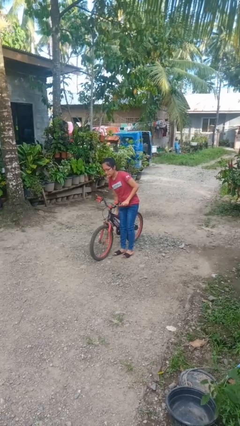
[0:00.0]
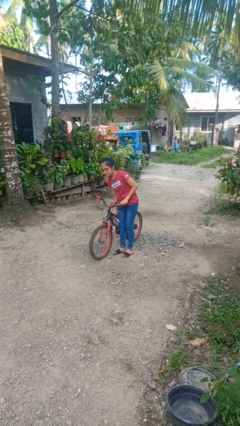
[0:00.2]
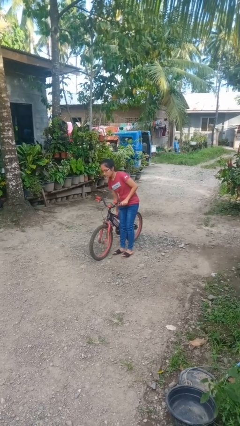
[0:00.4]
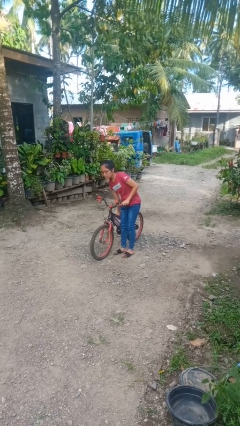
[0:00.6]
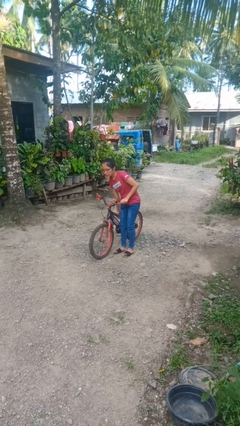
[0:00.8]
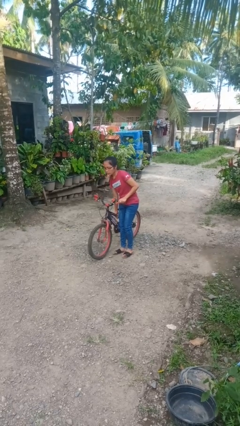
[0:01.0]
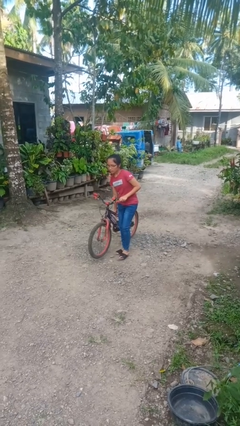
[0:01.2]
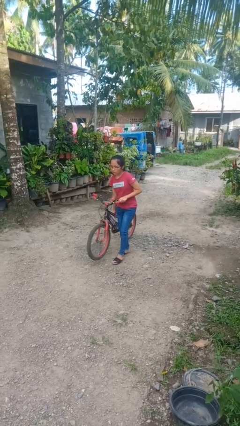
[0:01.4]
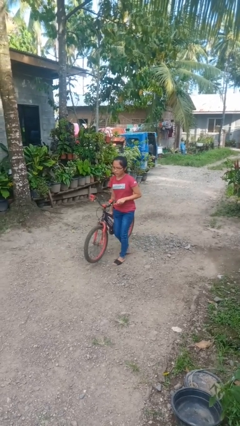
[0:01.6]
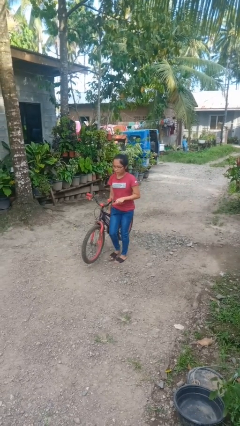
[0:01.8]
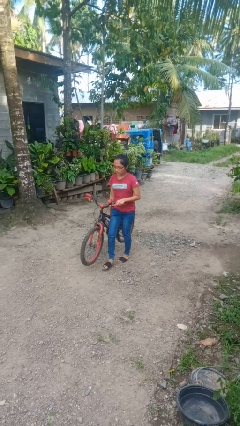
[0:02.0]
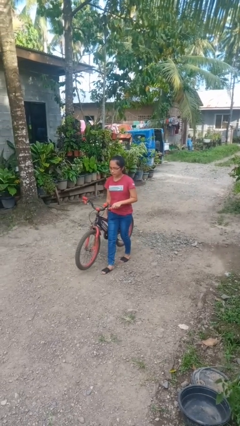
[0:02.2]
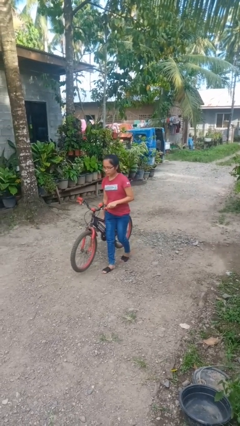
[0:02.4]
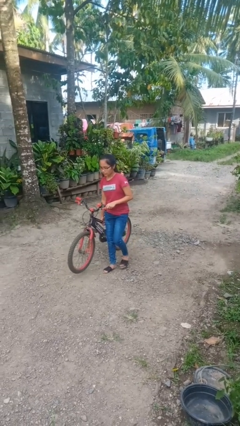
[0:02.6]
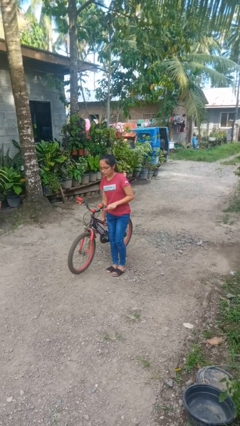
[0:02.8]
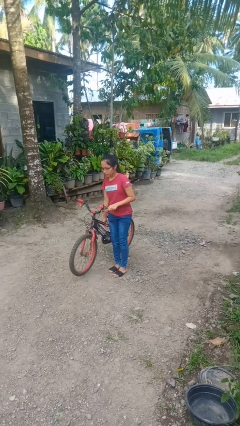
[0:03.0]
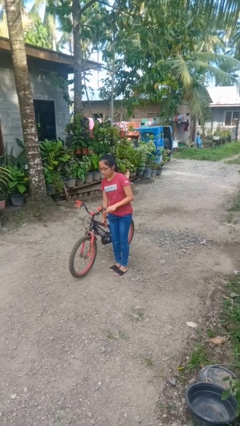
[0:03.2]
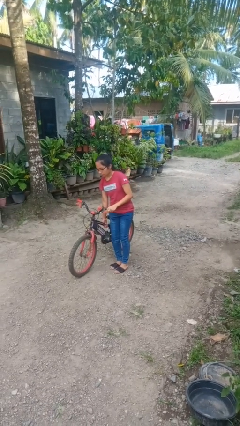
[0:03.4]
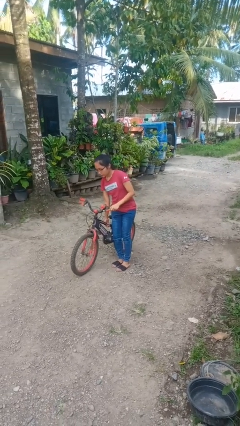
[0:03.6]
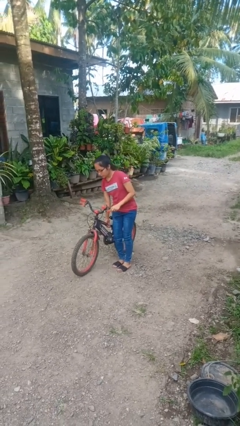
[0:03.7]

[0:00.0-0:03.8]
person carries bicycle

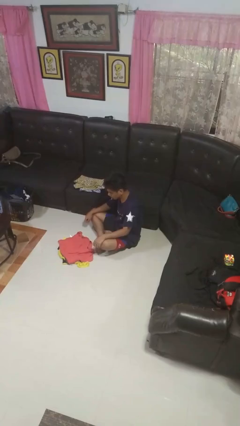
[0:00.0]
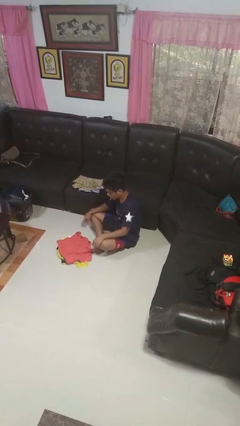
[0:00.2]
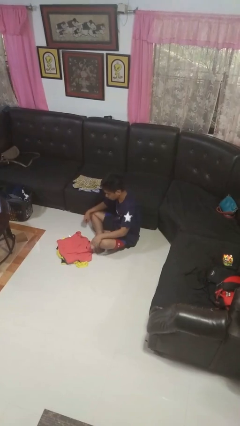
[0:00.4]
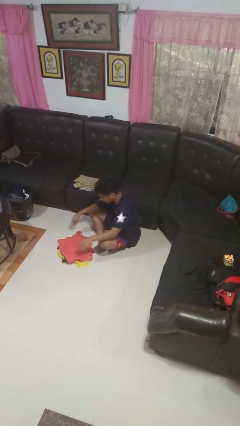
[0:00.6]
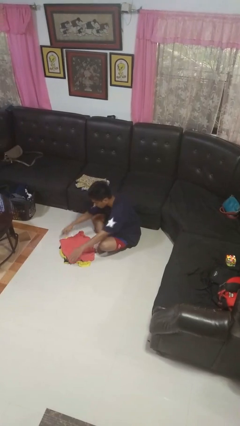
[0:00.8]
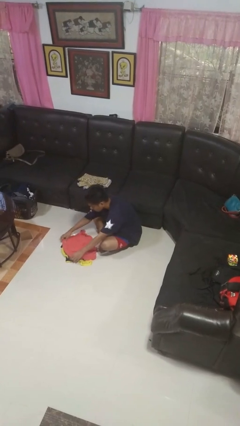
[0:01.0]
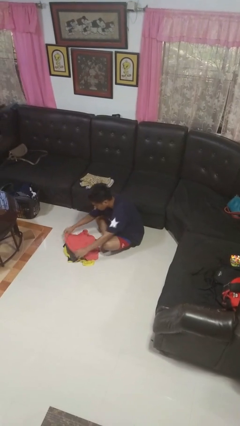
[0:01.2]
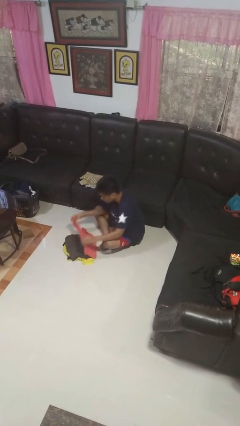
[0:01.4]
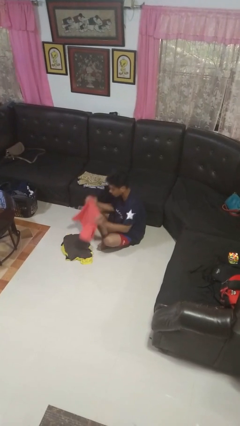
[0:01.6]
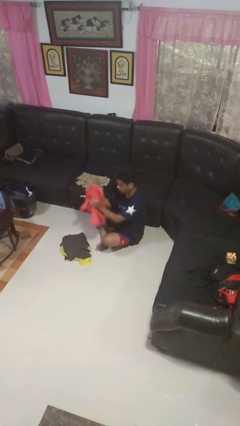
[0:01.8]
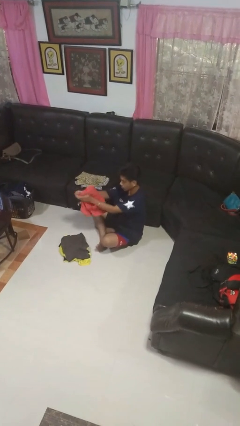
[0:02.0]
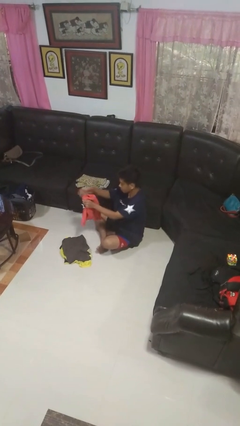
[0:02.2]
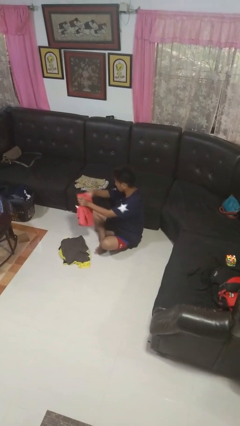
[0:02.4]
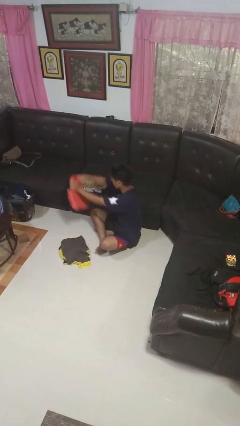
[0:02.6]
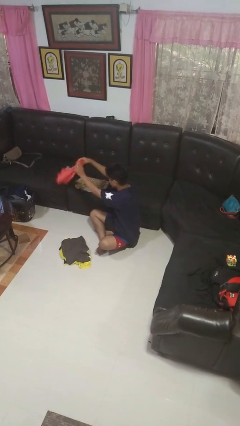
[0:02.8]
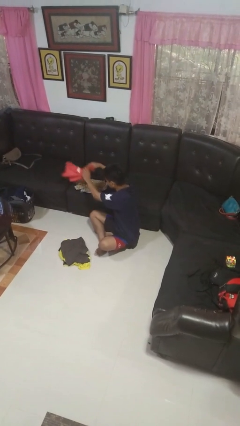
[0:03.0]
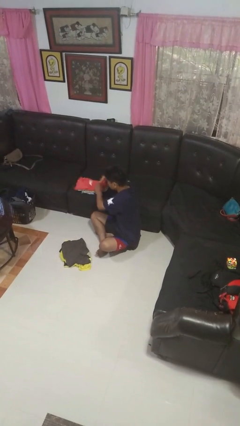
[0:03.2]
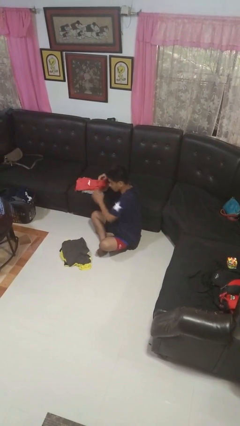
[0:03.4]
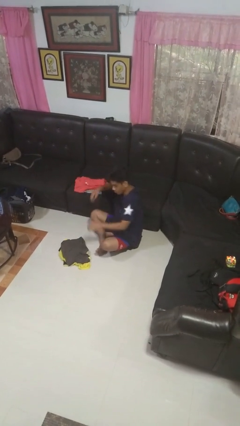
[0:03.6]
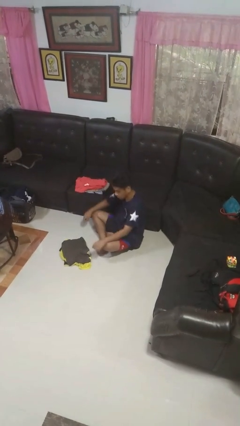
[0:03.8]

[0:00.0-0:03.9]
person folds shirt

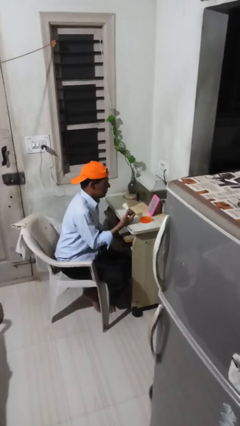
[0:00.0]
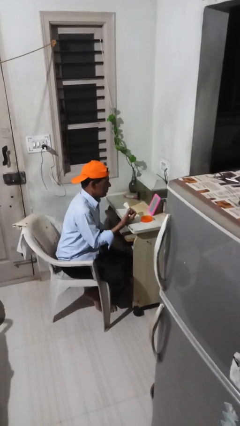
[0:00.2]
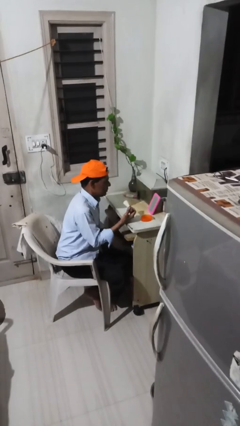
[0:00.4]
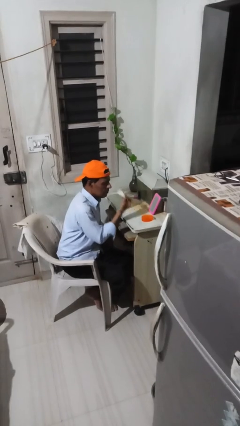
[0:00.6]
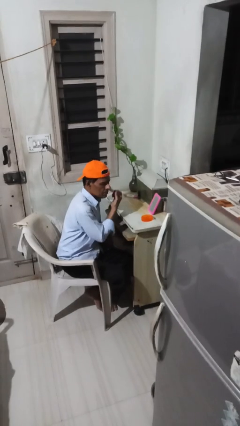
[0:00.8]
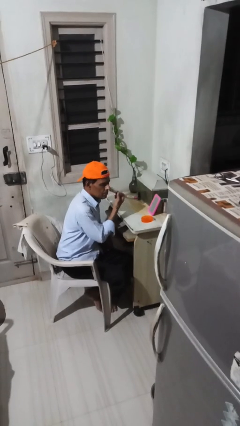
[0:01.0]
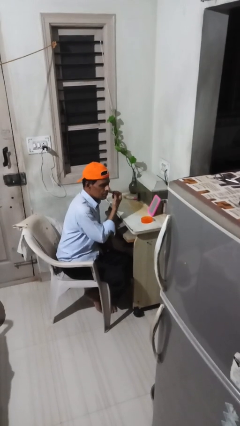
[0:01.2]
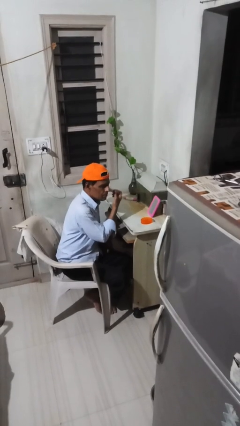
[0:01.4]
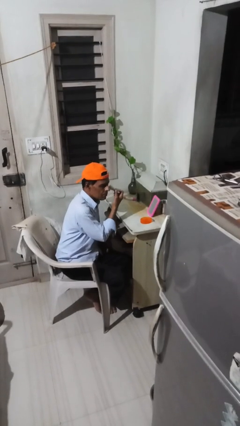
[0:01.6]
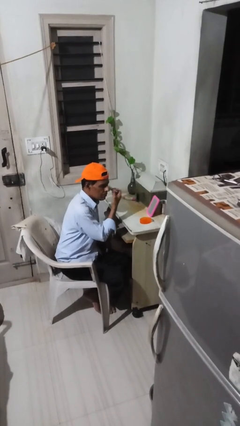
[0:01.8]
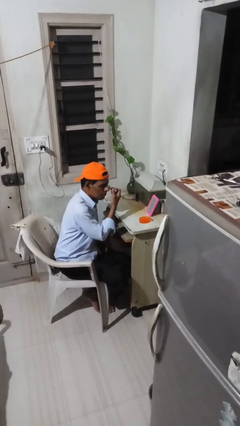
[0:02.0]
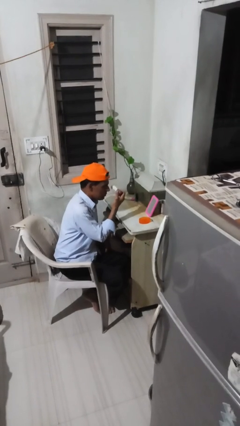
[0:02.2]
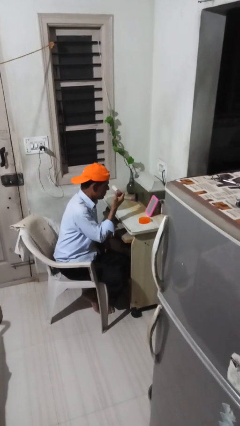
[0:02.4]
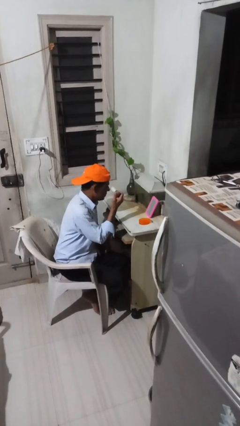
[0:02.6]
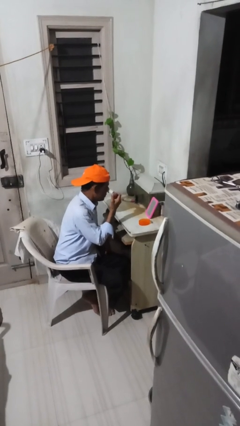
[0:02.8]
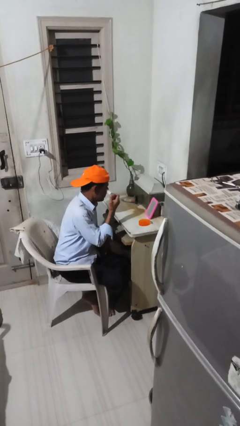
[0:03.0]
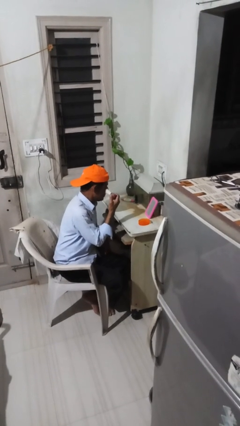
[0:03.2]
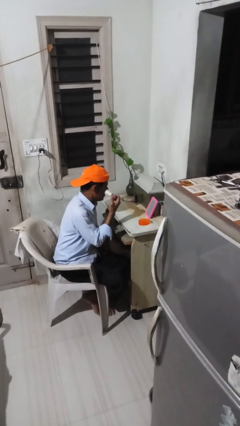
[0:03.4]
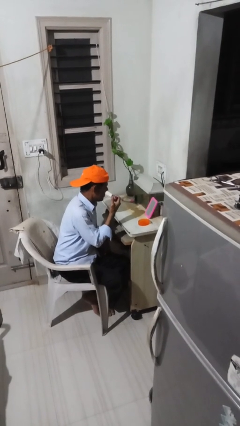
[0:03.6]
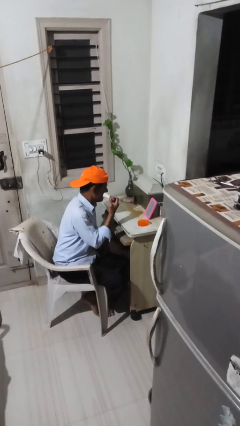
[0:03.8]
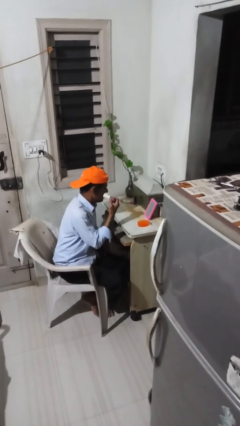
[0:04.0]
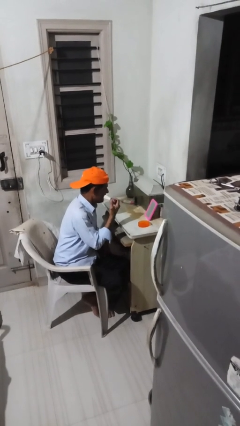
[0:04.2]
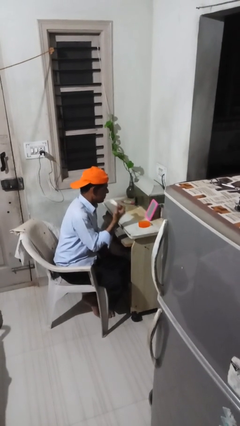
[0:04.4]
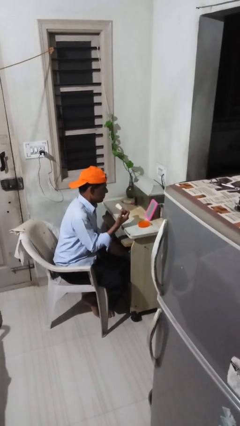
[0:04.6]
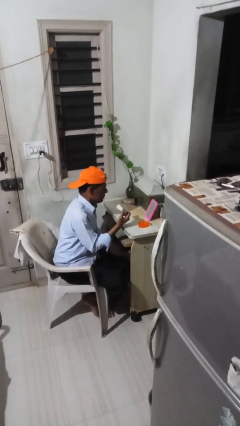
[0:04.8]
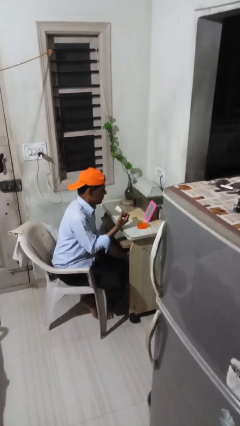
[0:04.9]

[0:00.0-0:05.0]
person applies foundation makeup

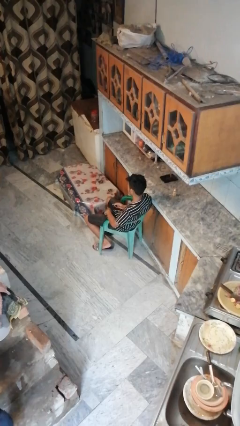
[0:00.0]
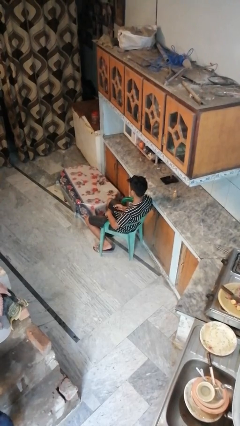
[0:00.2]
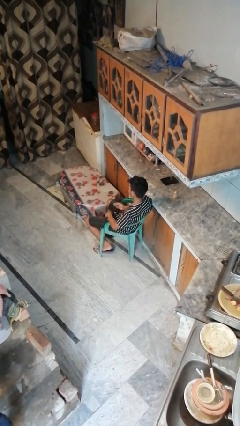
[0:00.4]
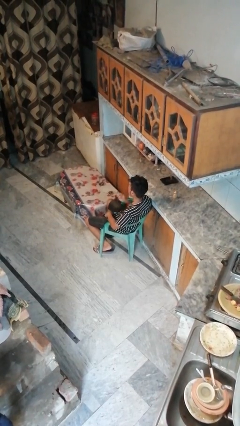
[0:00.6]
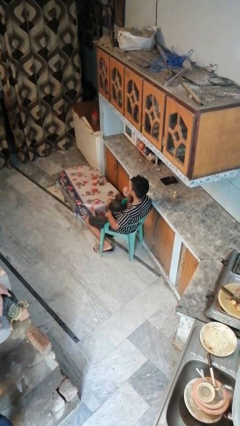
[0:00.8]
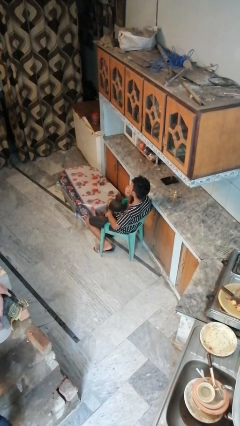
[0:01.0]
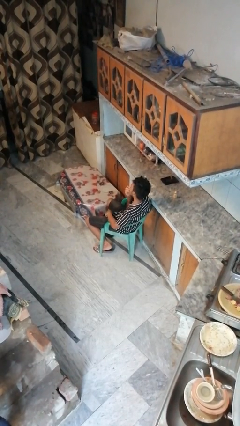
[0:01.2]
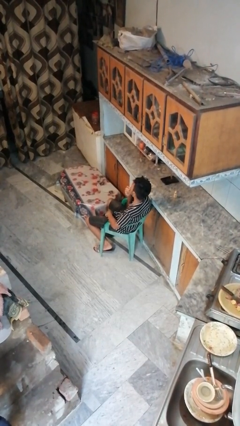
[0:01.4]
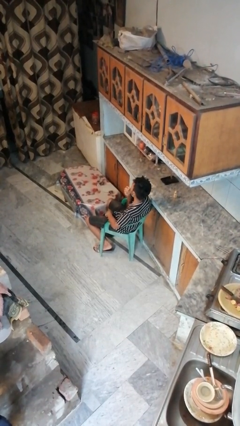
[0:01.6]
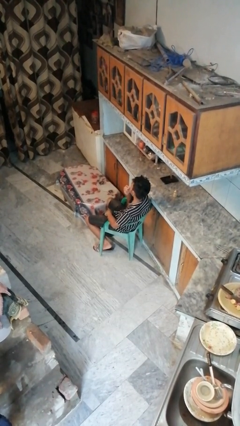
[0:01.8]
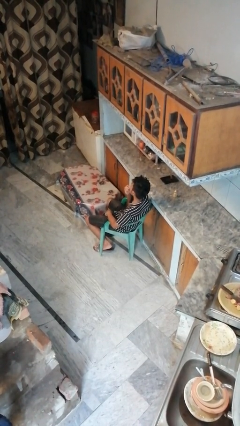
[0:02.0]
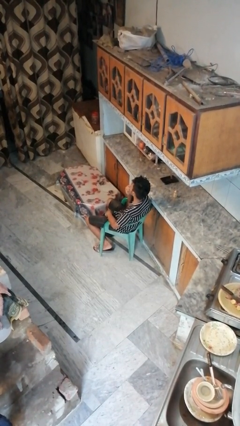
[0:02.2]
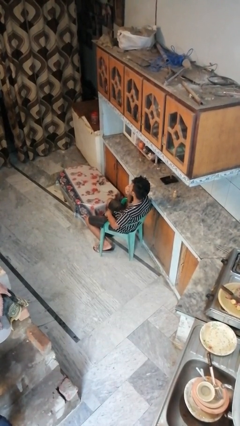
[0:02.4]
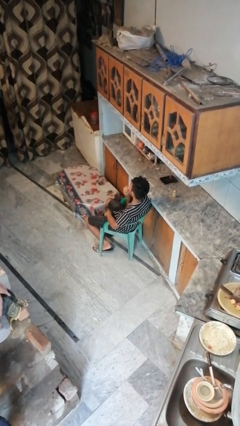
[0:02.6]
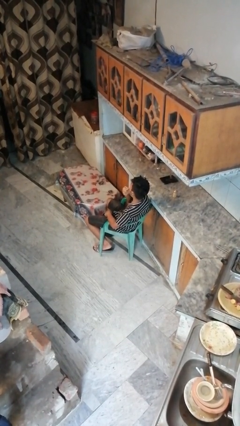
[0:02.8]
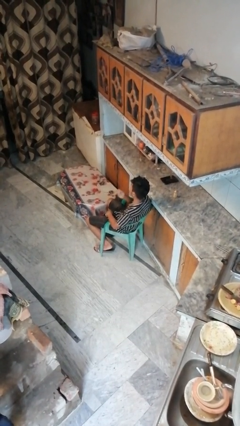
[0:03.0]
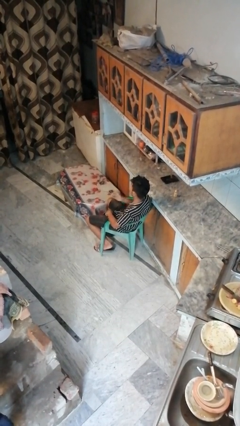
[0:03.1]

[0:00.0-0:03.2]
person applies lip makeup

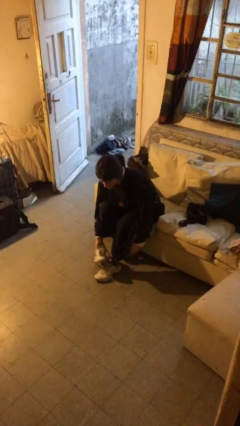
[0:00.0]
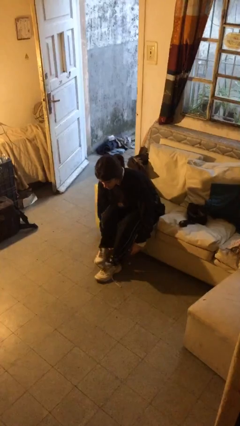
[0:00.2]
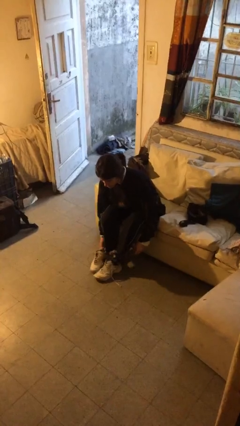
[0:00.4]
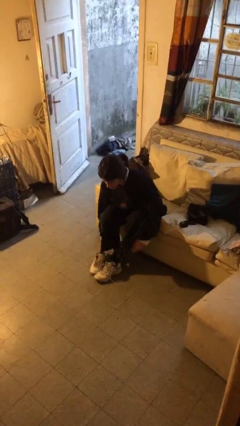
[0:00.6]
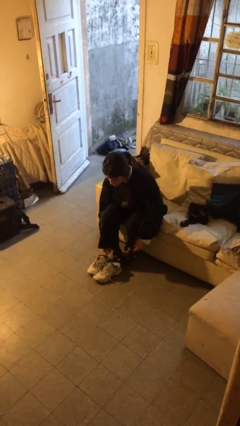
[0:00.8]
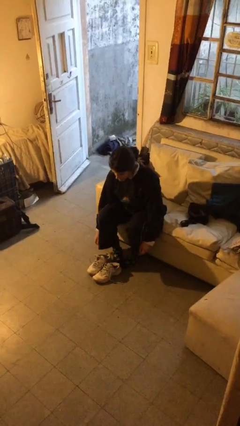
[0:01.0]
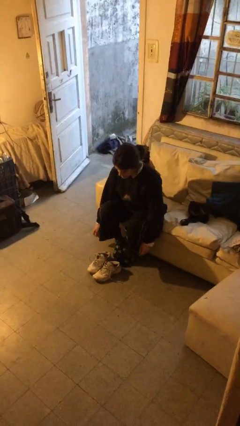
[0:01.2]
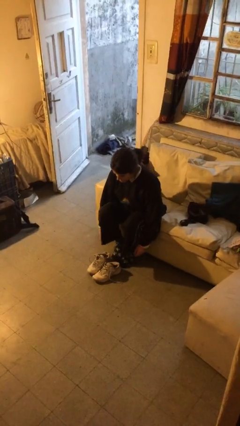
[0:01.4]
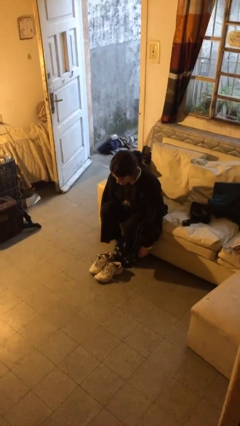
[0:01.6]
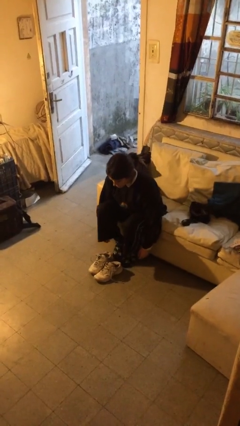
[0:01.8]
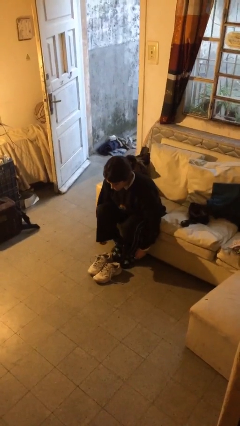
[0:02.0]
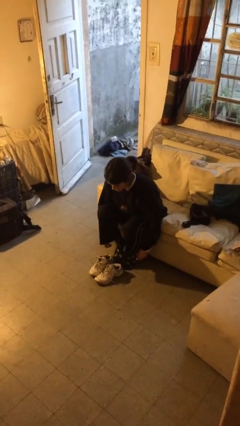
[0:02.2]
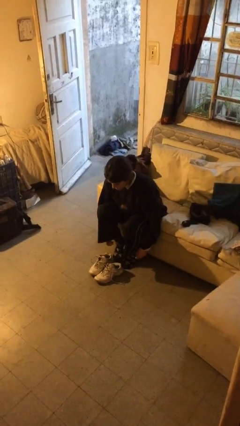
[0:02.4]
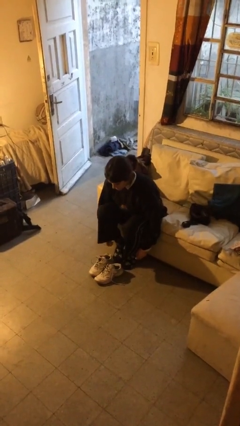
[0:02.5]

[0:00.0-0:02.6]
person takes off shoes
